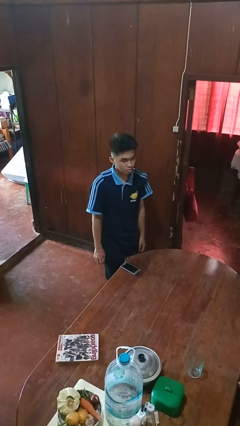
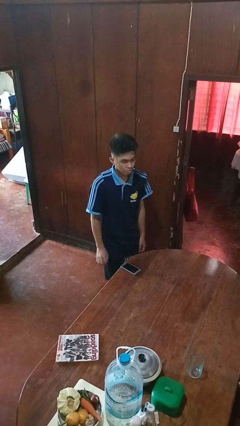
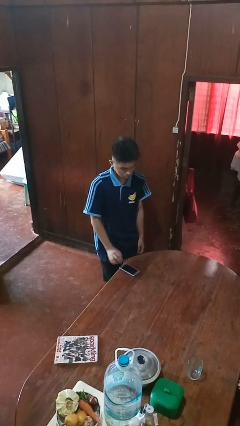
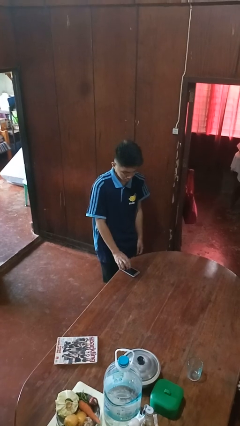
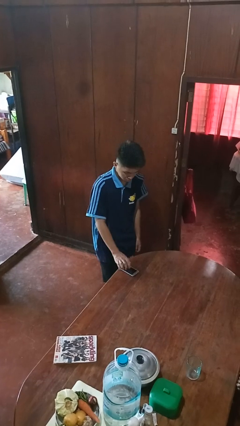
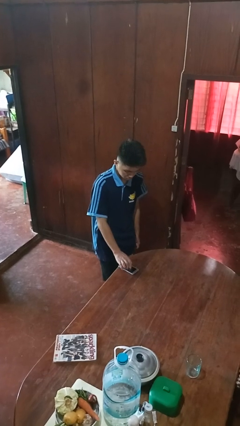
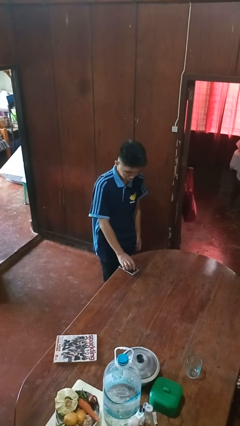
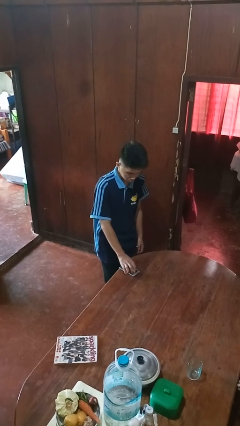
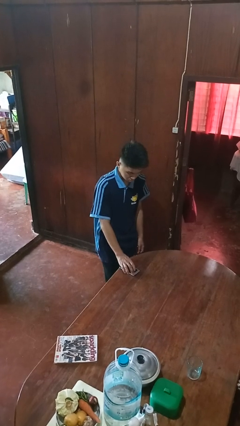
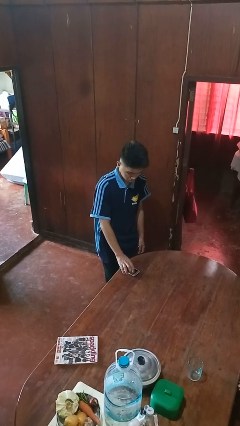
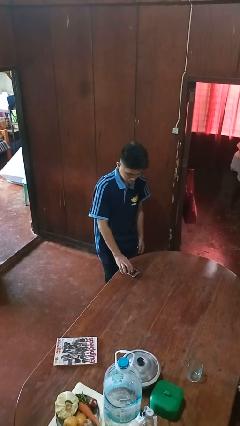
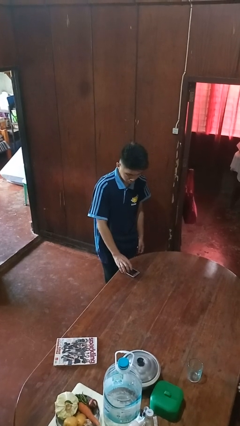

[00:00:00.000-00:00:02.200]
person taps object with finger

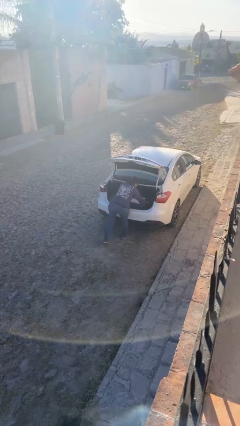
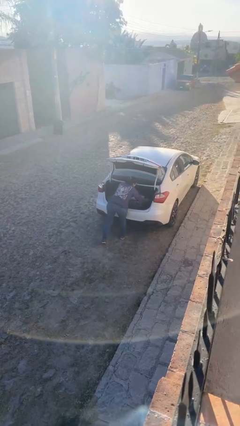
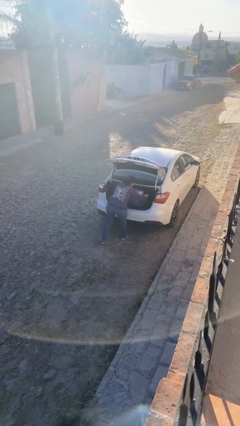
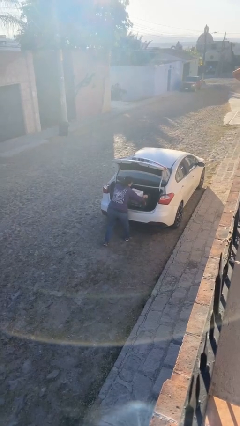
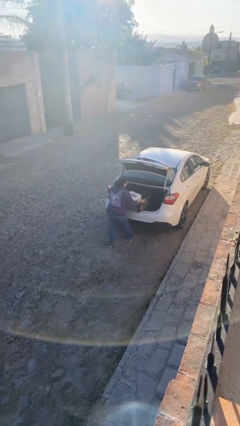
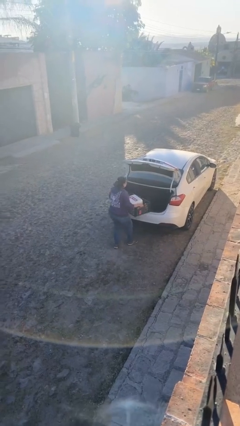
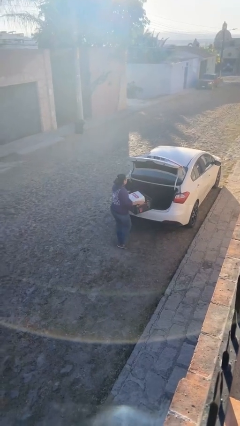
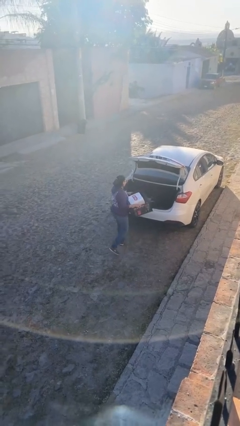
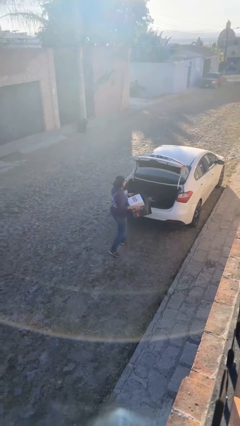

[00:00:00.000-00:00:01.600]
person unloads car

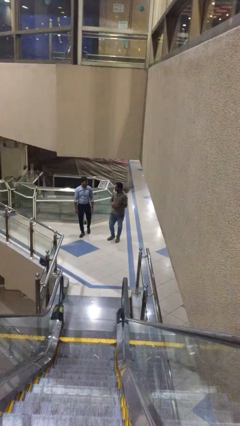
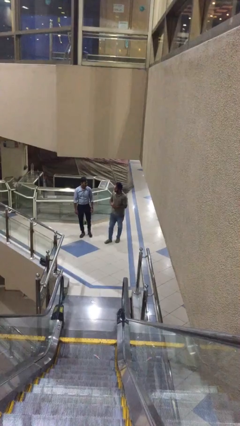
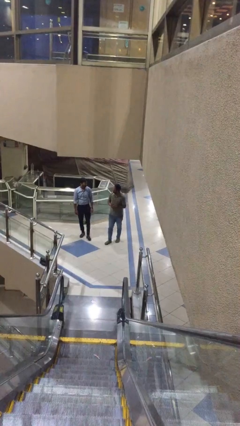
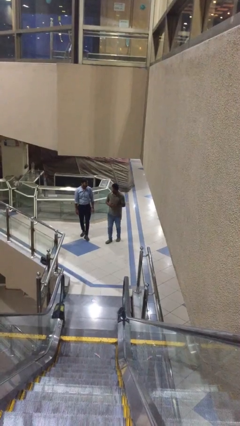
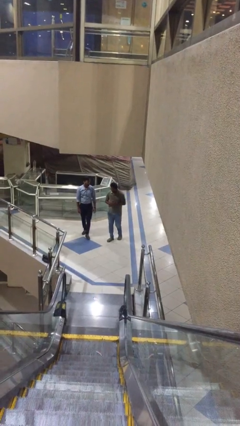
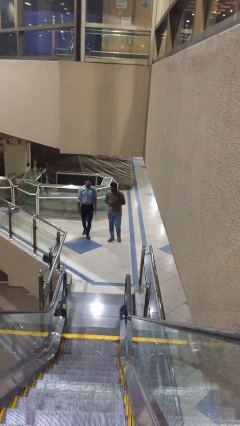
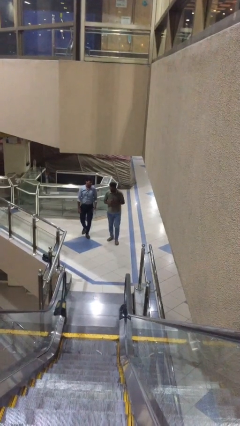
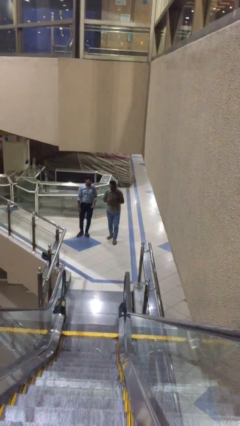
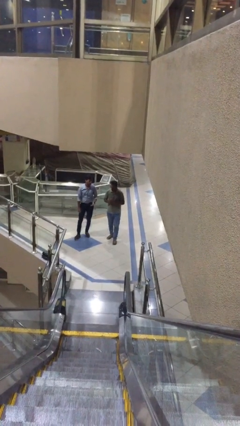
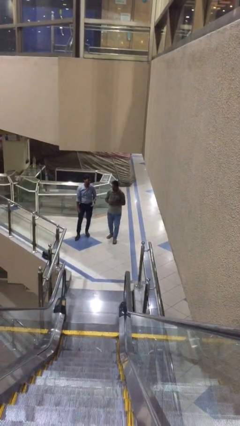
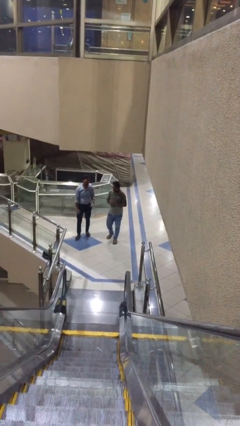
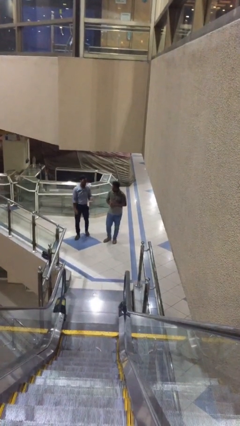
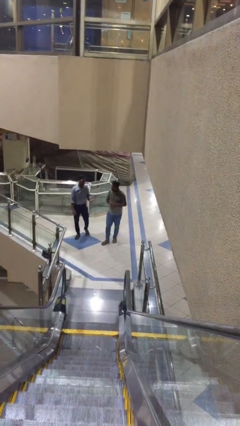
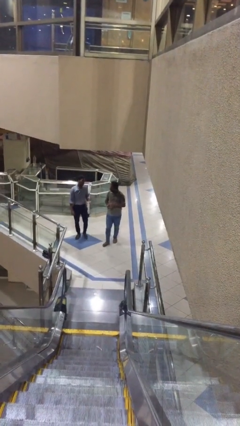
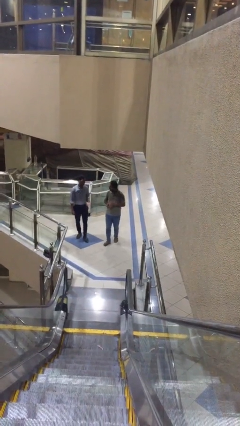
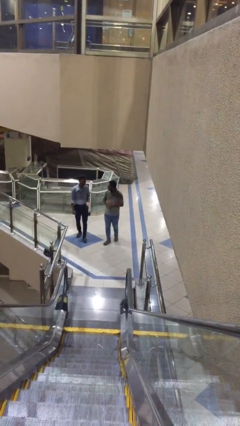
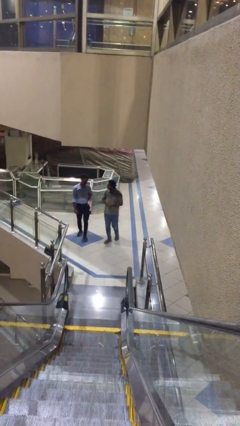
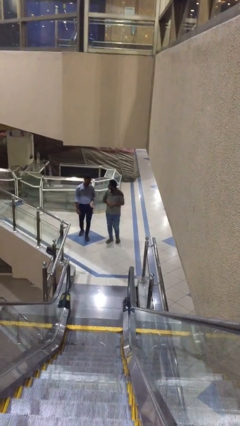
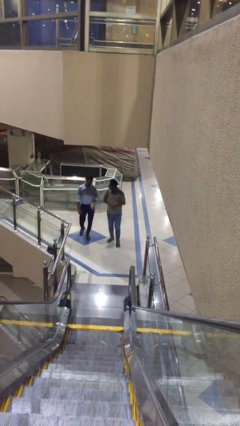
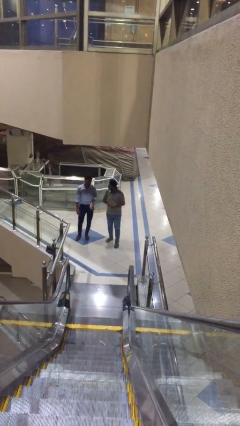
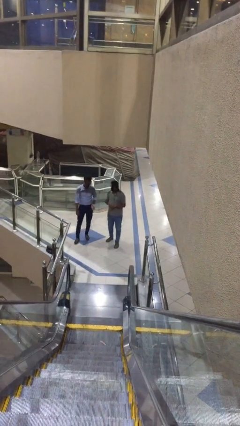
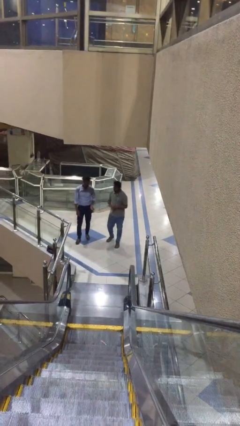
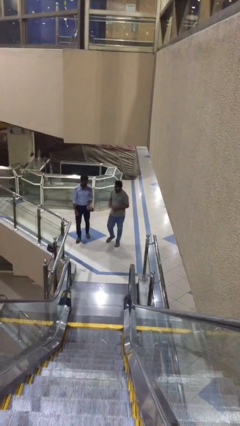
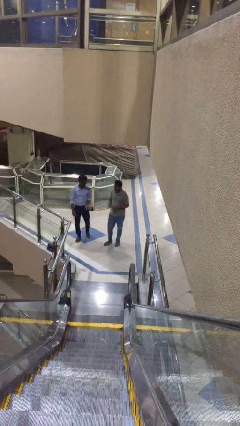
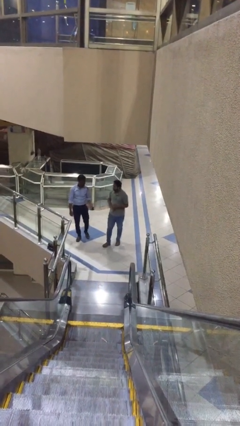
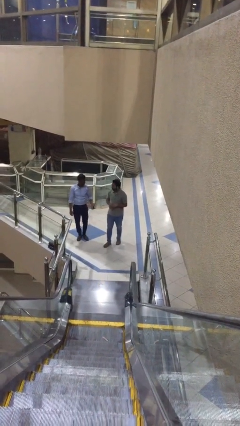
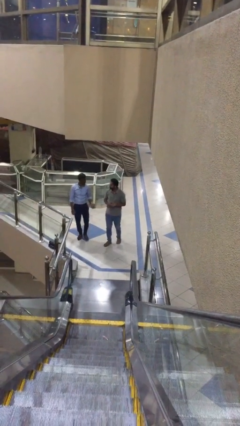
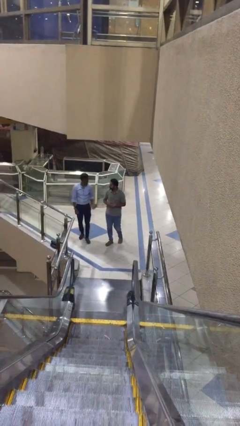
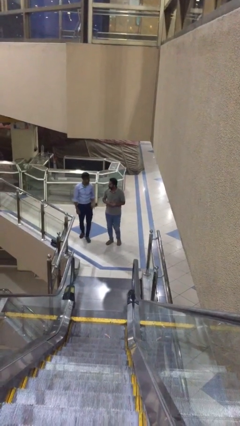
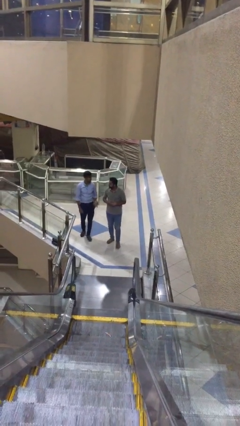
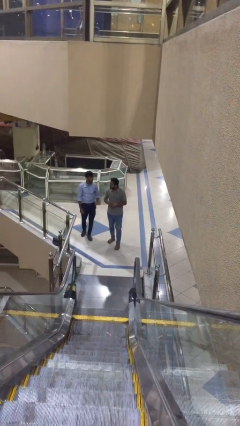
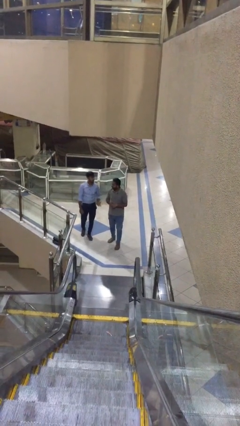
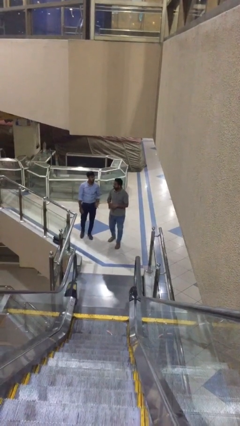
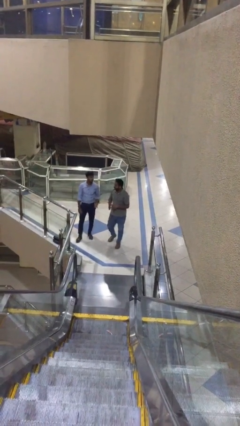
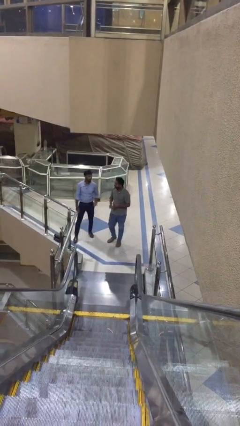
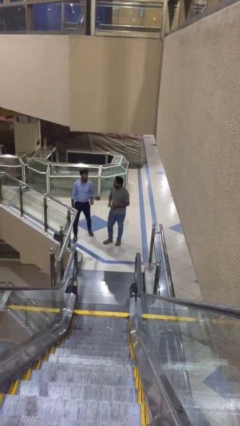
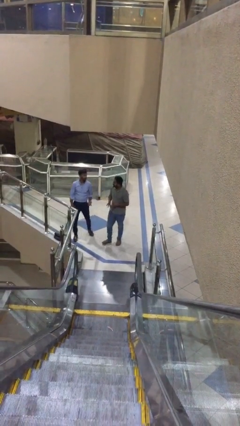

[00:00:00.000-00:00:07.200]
person talks to person

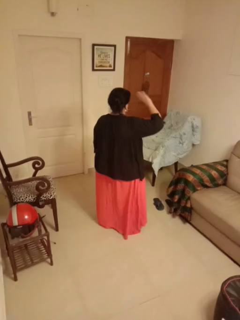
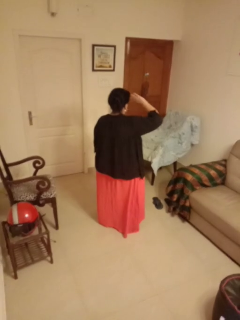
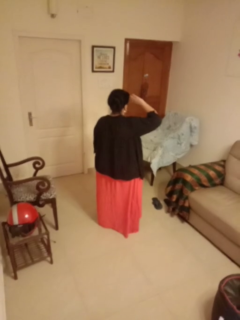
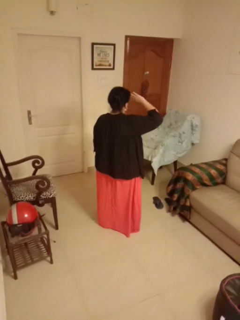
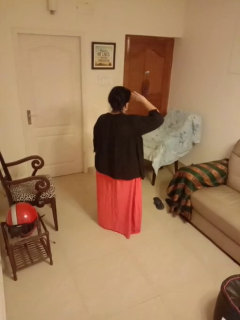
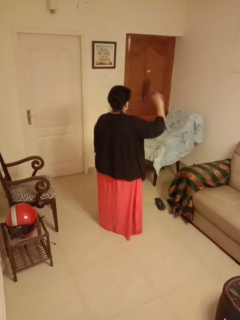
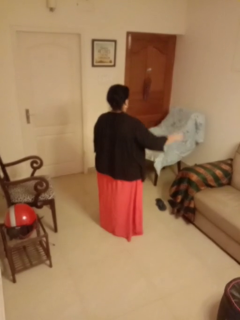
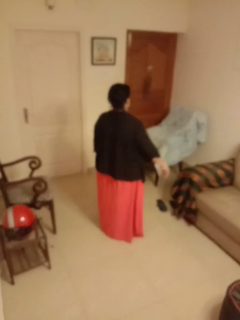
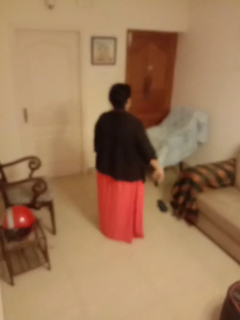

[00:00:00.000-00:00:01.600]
person salutes

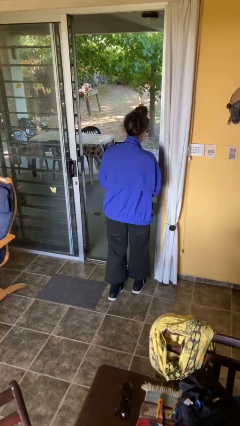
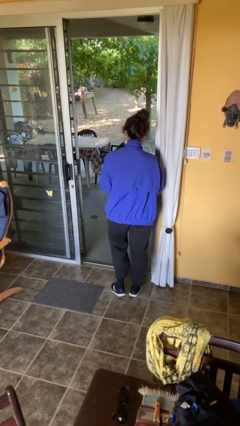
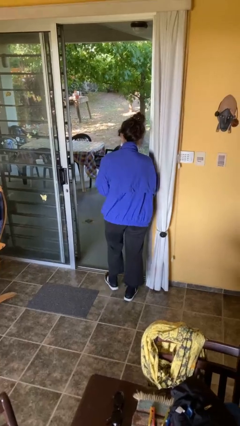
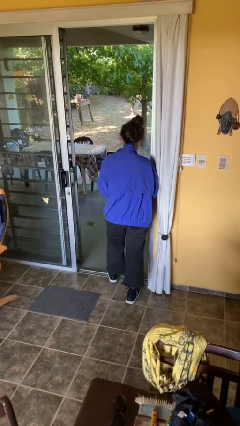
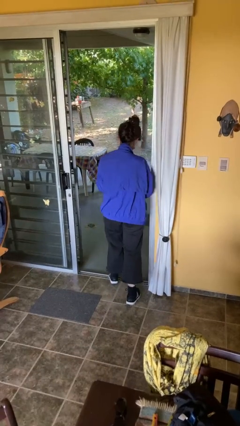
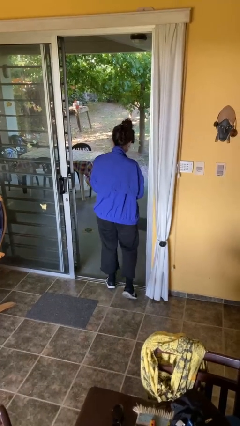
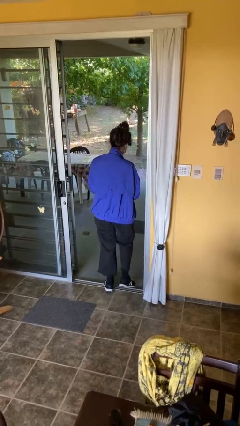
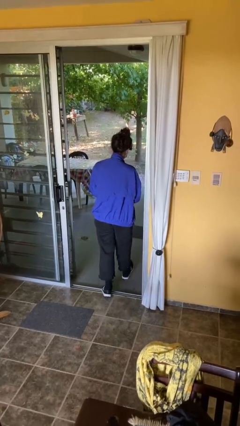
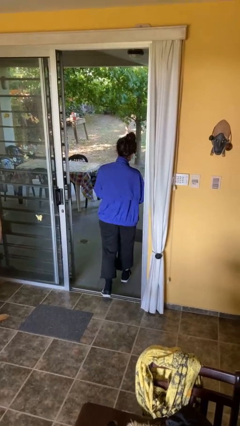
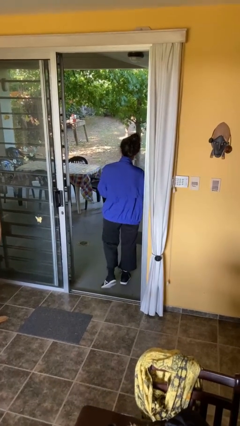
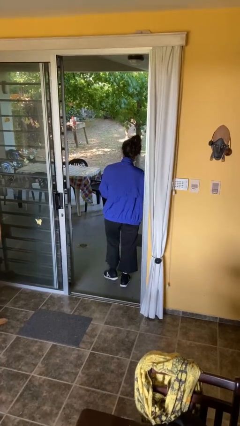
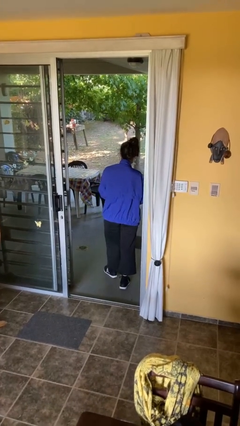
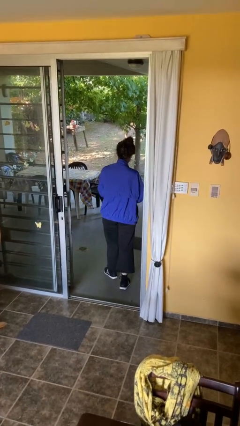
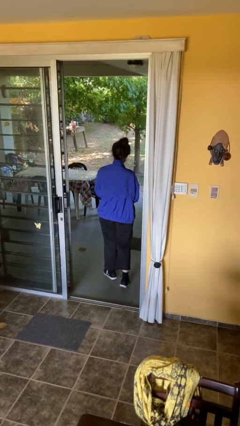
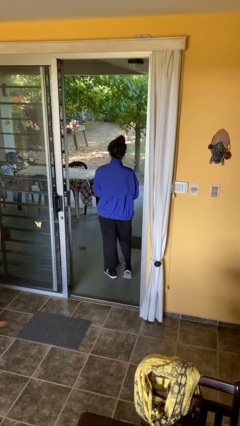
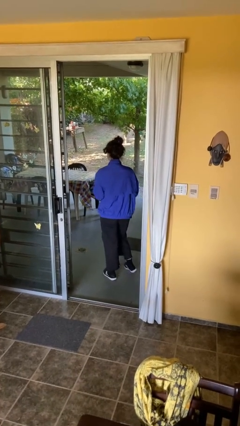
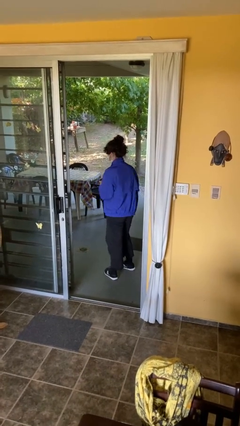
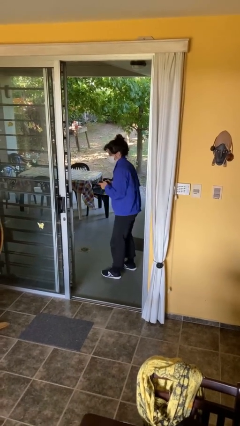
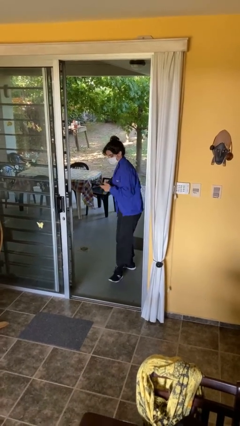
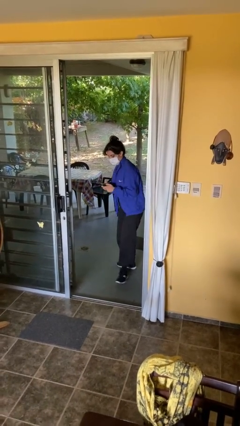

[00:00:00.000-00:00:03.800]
person exits scene through structure

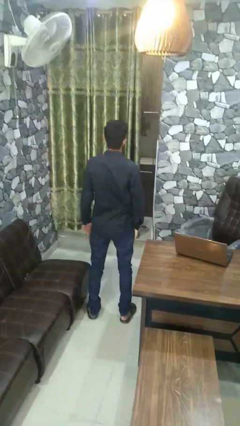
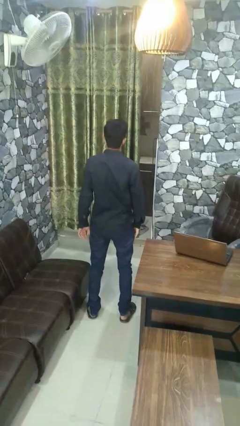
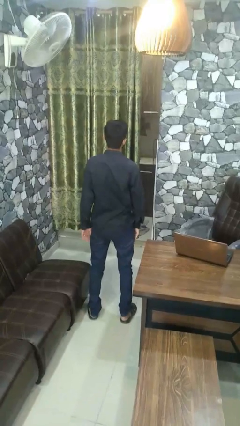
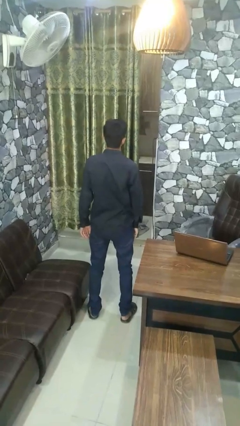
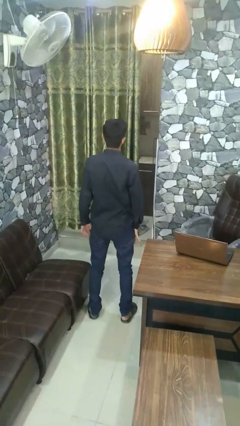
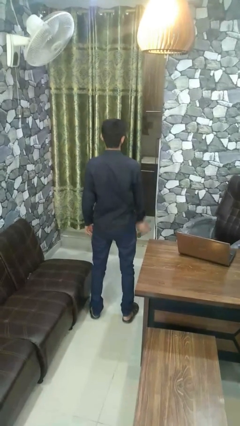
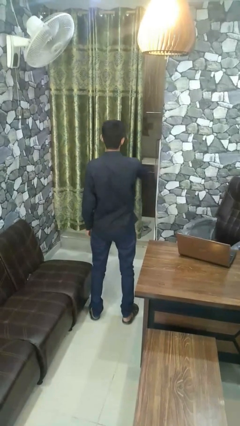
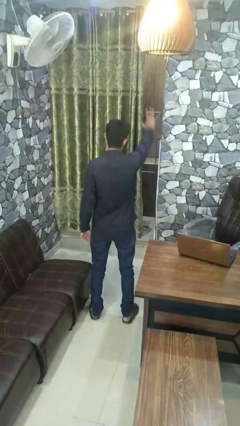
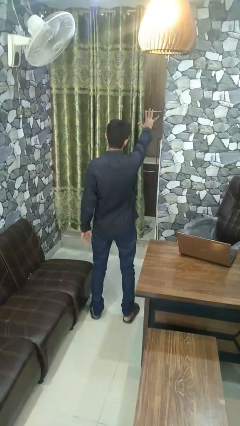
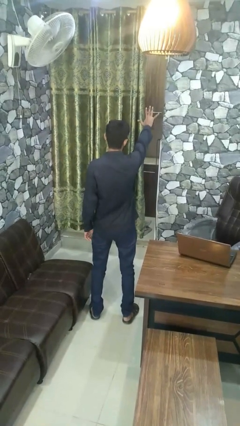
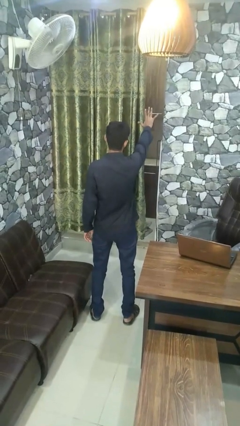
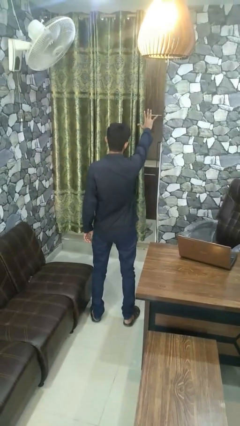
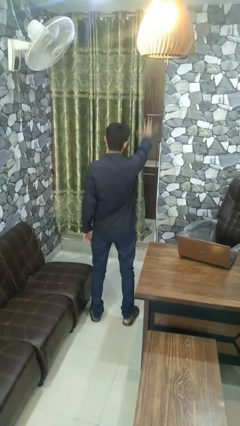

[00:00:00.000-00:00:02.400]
person gestures number five
